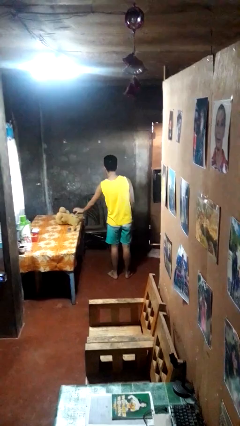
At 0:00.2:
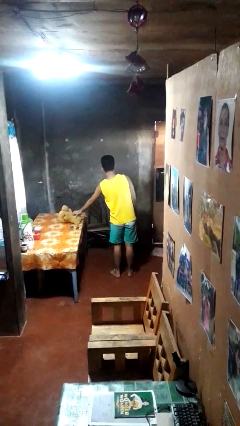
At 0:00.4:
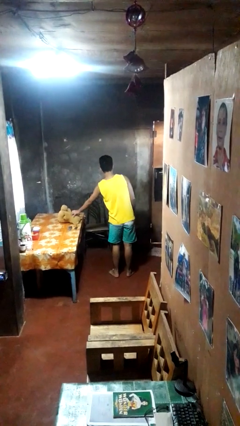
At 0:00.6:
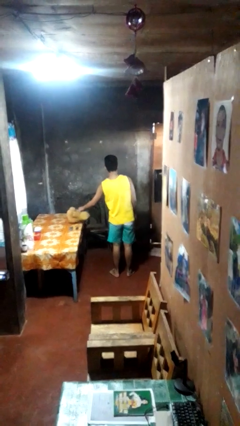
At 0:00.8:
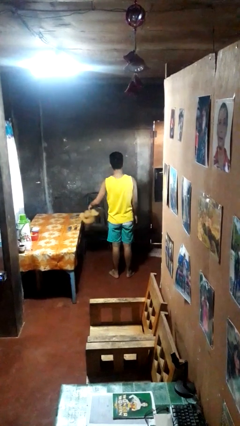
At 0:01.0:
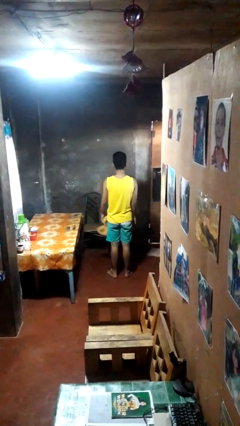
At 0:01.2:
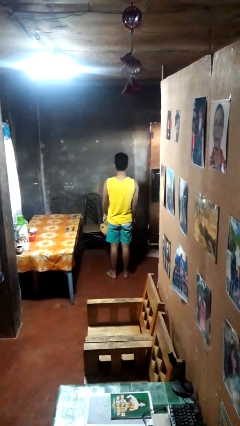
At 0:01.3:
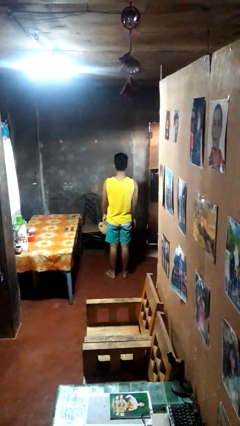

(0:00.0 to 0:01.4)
person picks up object from table

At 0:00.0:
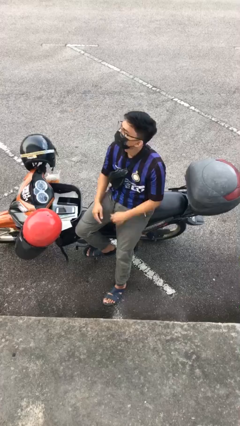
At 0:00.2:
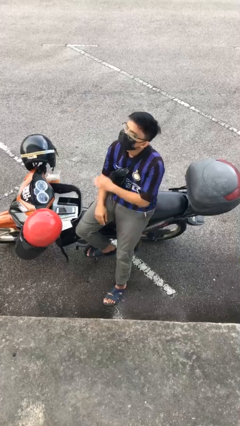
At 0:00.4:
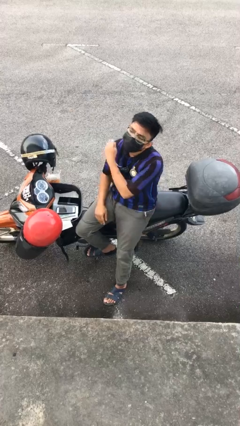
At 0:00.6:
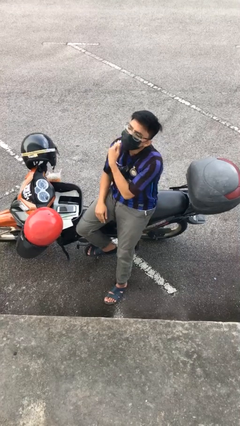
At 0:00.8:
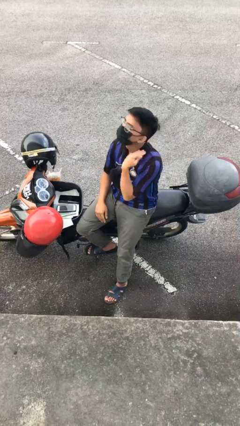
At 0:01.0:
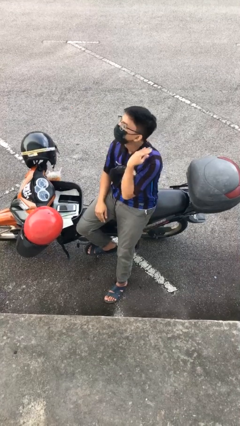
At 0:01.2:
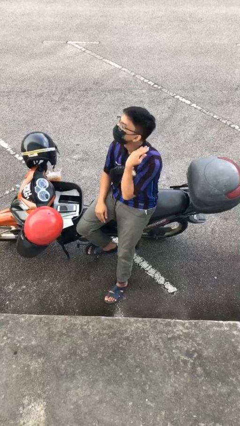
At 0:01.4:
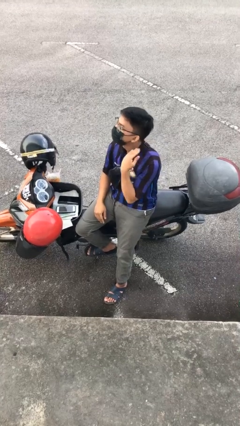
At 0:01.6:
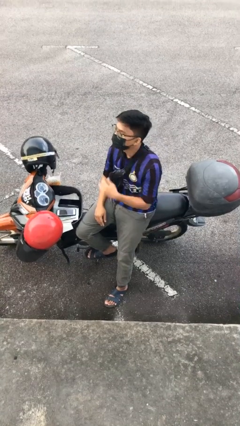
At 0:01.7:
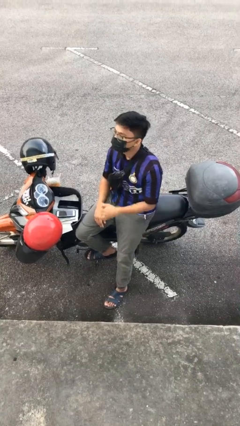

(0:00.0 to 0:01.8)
person gestures cut

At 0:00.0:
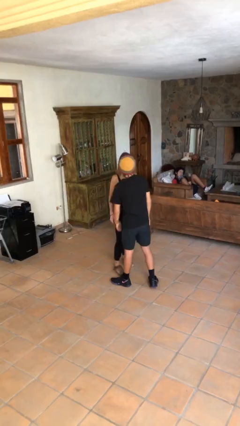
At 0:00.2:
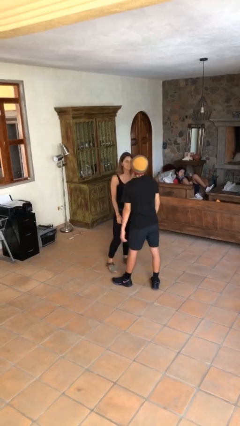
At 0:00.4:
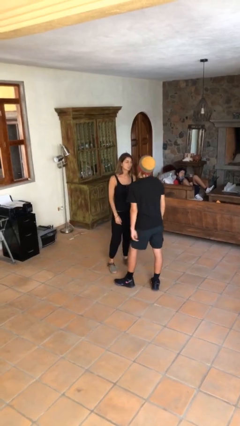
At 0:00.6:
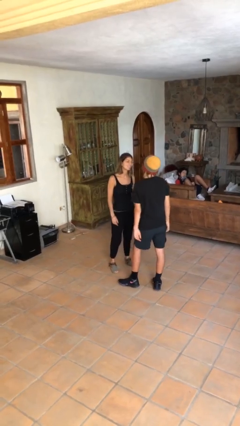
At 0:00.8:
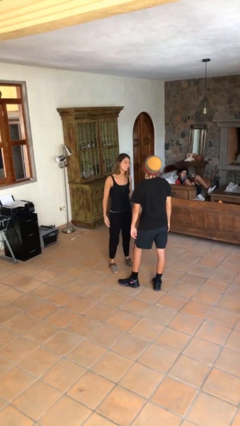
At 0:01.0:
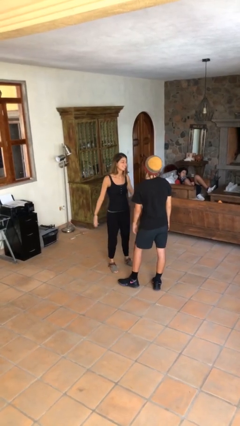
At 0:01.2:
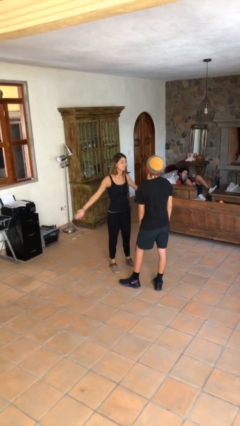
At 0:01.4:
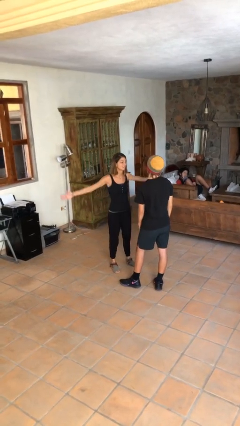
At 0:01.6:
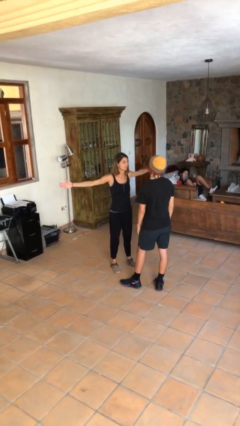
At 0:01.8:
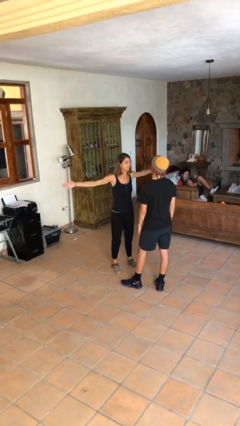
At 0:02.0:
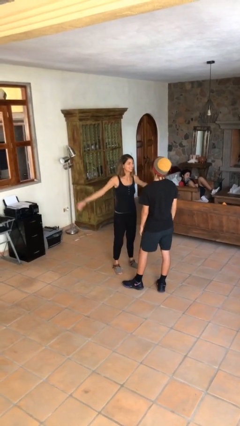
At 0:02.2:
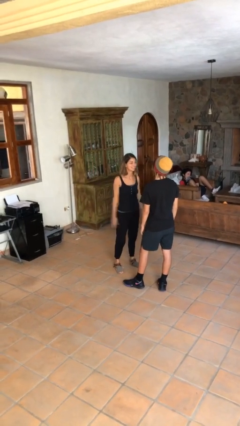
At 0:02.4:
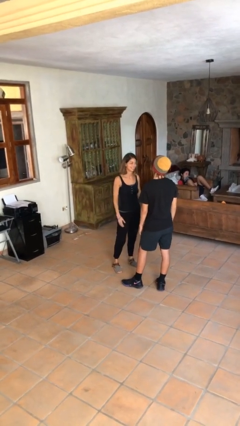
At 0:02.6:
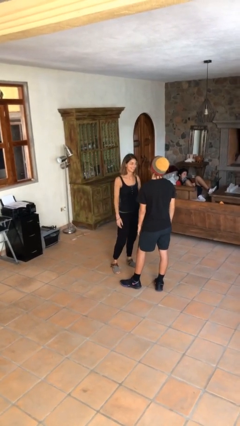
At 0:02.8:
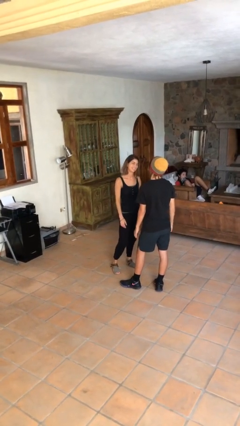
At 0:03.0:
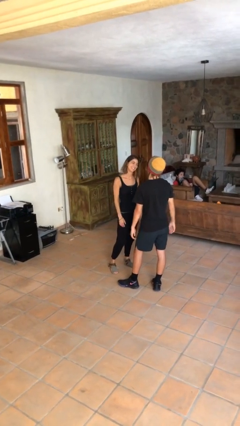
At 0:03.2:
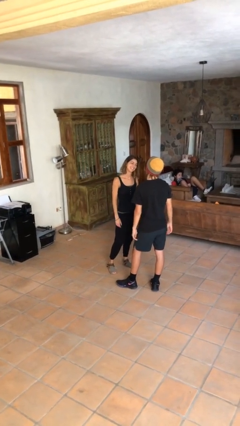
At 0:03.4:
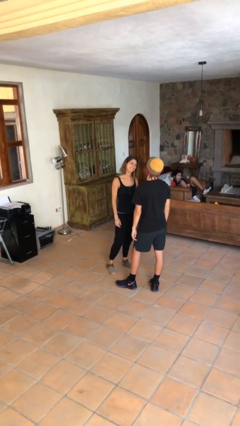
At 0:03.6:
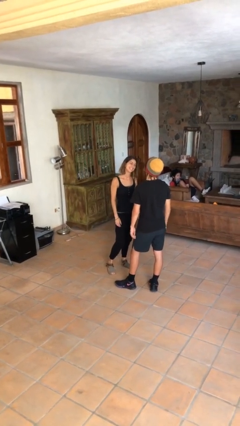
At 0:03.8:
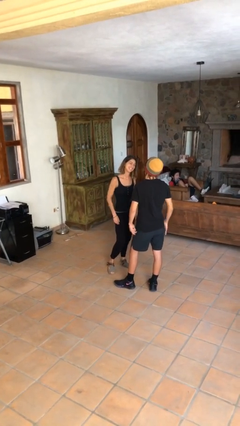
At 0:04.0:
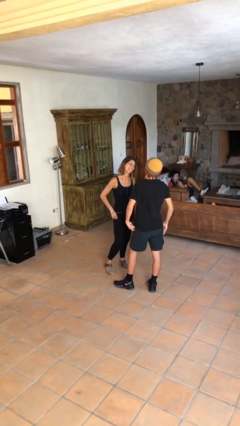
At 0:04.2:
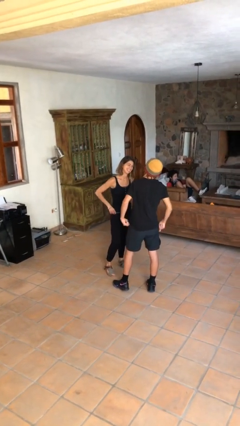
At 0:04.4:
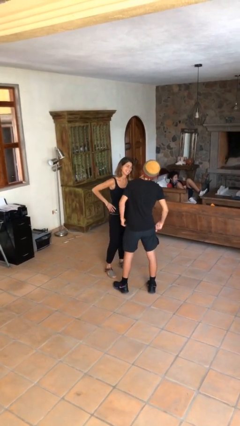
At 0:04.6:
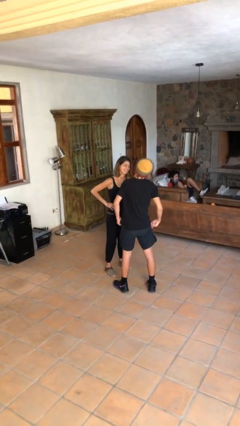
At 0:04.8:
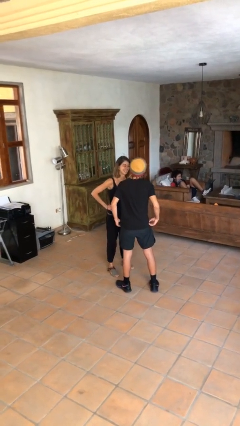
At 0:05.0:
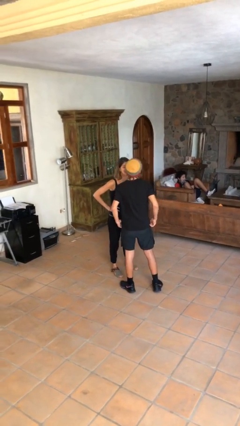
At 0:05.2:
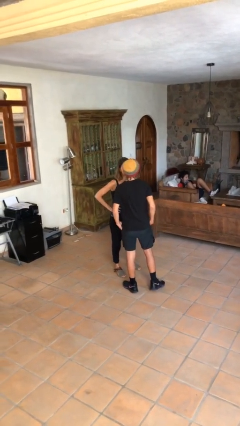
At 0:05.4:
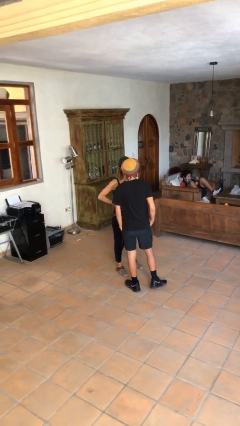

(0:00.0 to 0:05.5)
person talks to person

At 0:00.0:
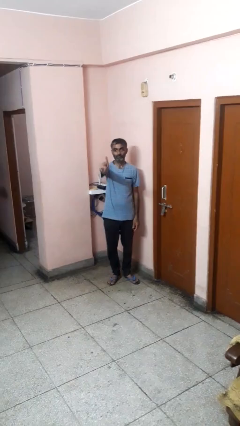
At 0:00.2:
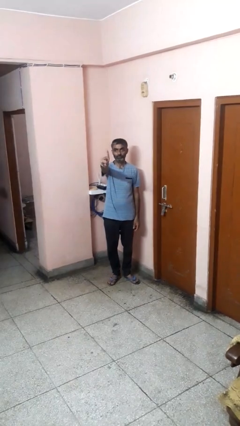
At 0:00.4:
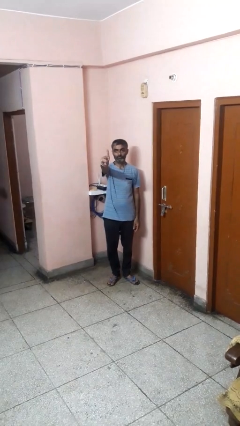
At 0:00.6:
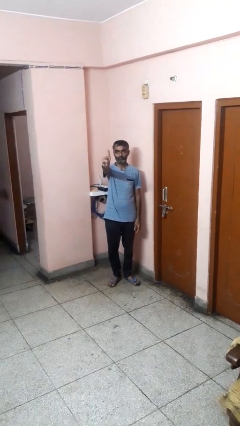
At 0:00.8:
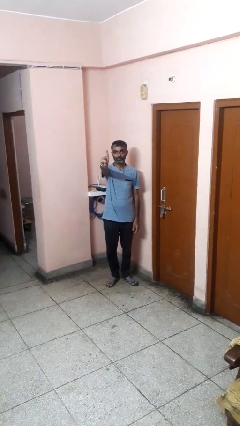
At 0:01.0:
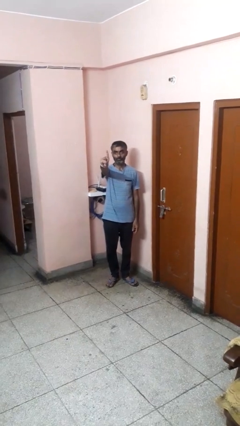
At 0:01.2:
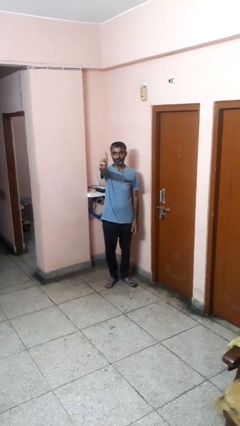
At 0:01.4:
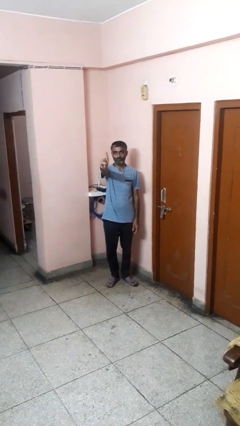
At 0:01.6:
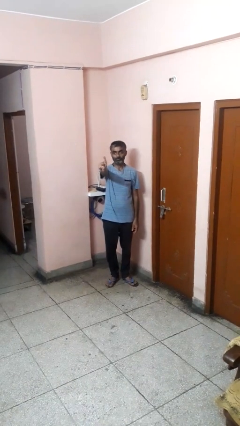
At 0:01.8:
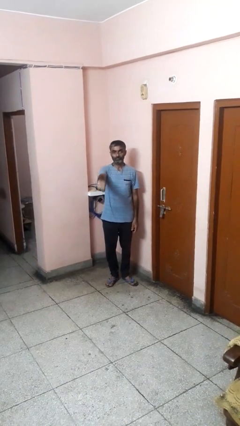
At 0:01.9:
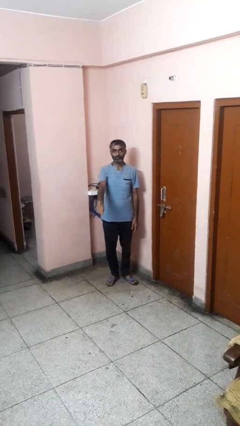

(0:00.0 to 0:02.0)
person gestures number one

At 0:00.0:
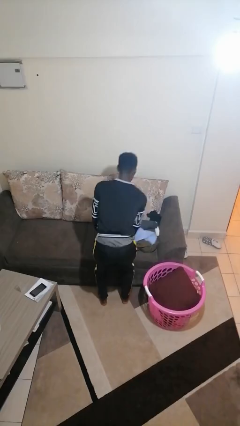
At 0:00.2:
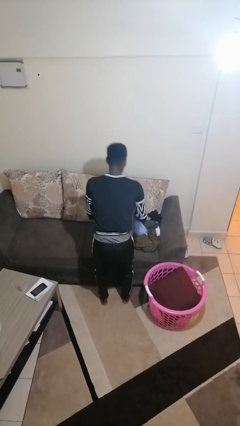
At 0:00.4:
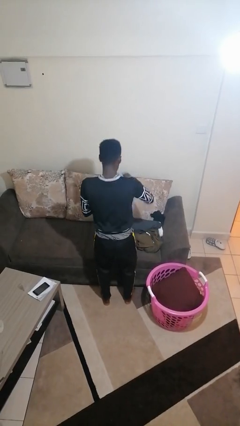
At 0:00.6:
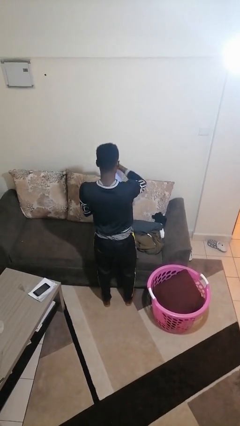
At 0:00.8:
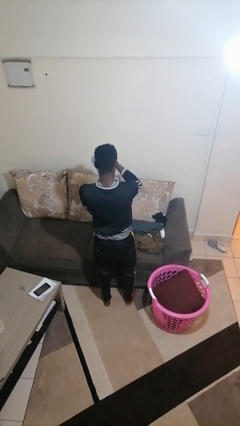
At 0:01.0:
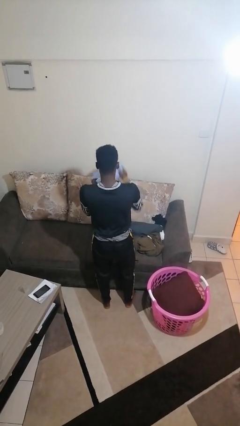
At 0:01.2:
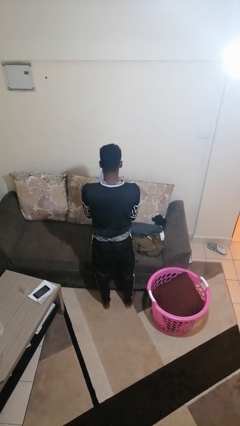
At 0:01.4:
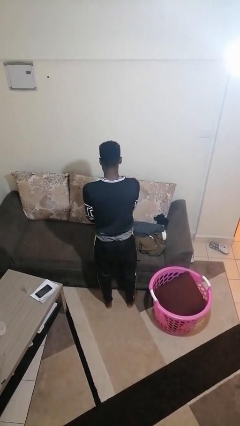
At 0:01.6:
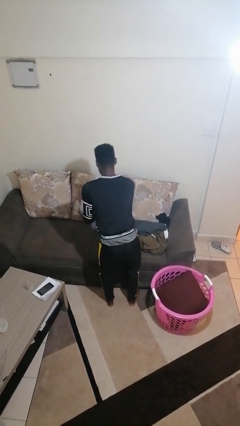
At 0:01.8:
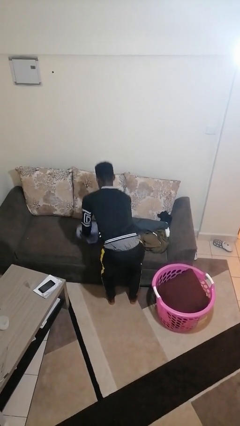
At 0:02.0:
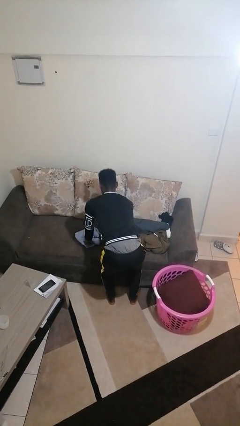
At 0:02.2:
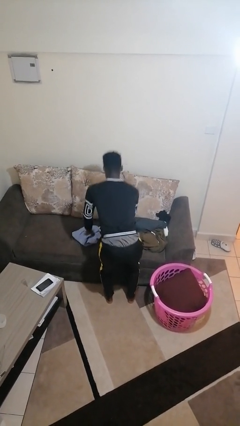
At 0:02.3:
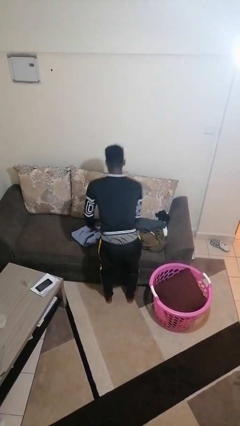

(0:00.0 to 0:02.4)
person folds shirt

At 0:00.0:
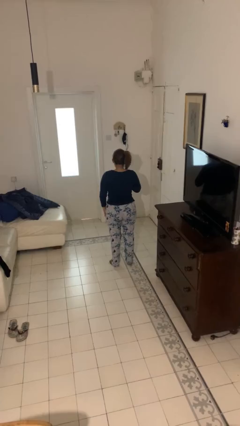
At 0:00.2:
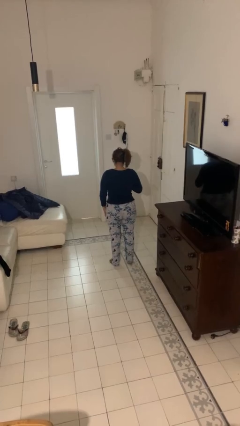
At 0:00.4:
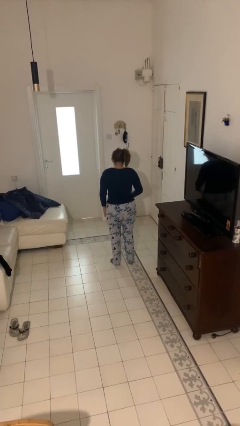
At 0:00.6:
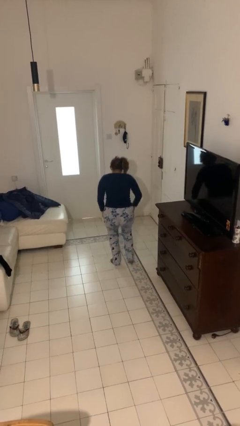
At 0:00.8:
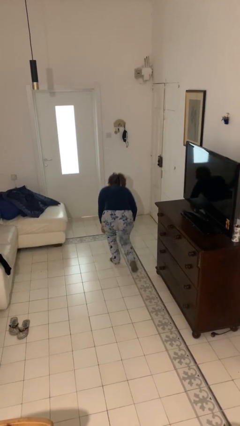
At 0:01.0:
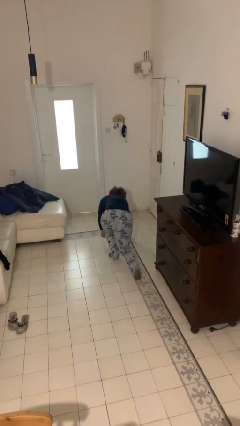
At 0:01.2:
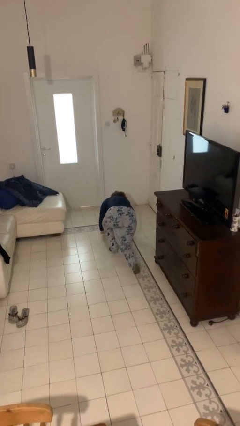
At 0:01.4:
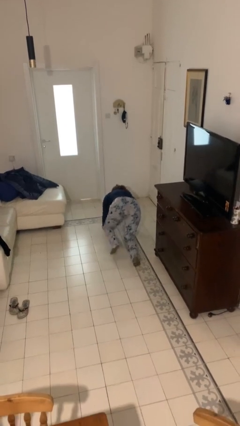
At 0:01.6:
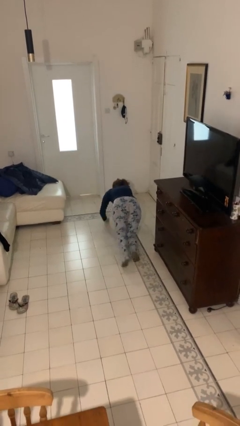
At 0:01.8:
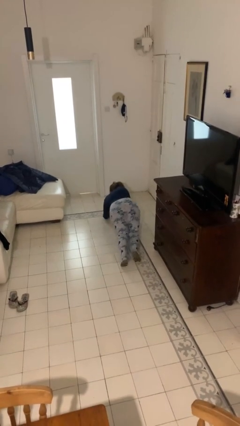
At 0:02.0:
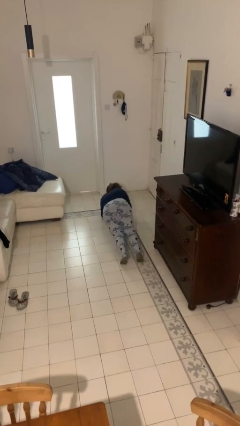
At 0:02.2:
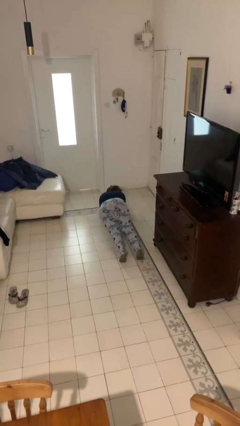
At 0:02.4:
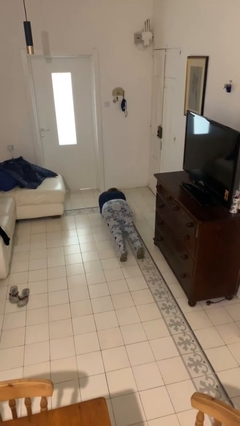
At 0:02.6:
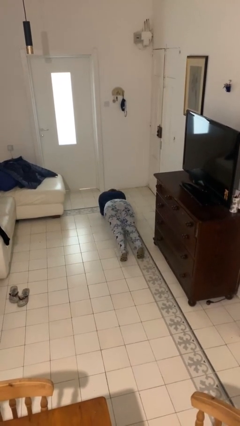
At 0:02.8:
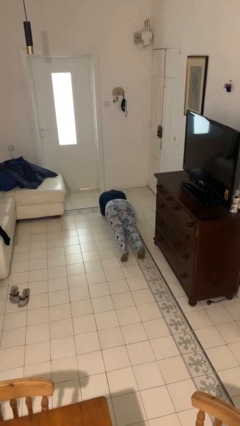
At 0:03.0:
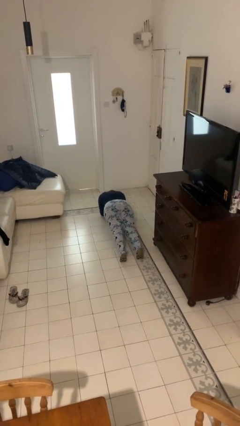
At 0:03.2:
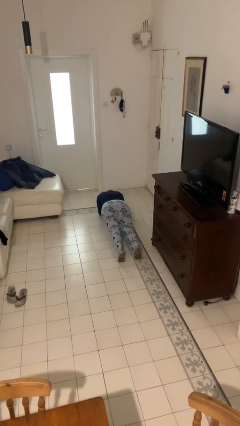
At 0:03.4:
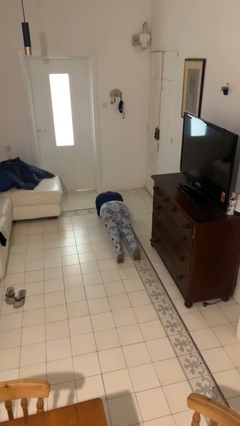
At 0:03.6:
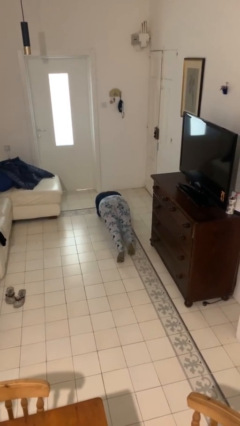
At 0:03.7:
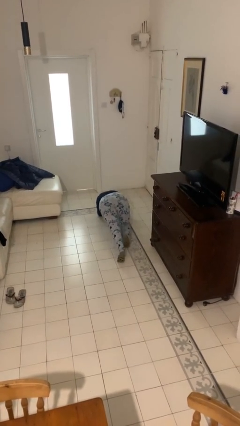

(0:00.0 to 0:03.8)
person exercises with plank

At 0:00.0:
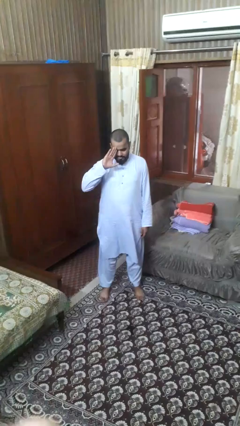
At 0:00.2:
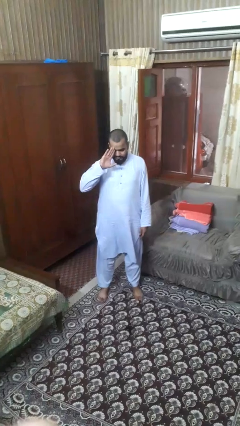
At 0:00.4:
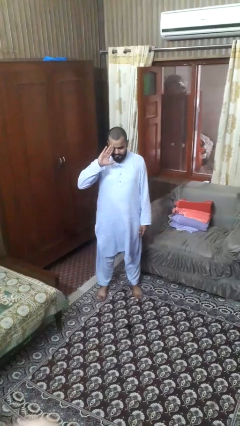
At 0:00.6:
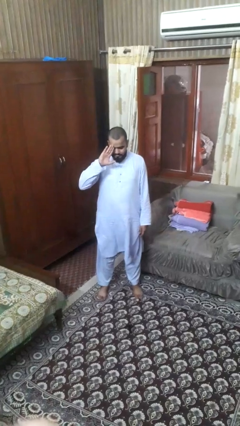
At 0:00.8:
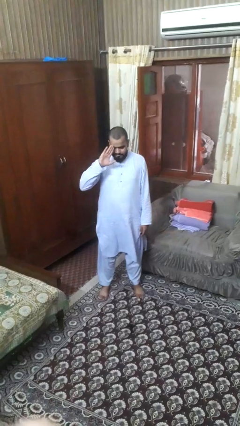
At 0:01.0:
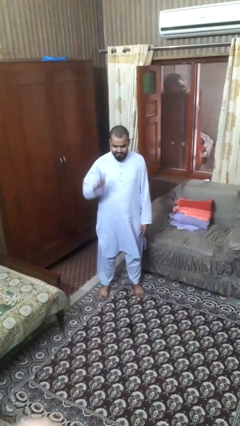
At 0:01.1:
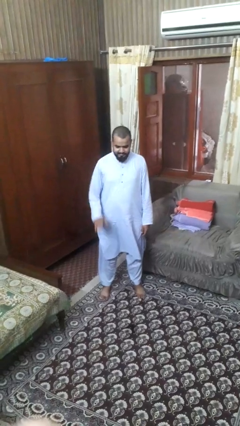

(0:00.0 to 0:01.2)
person salutes
